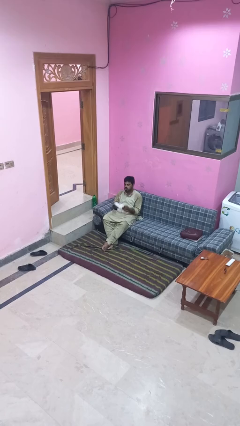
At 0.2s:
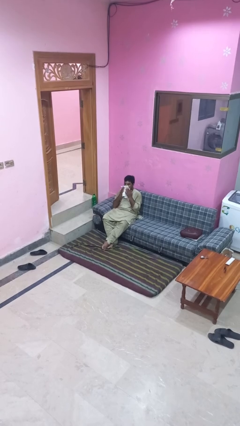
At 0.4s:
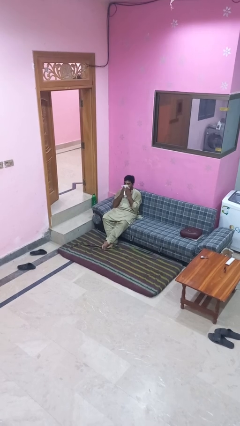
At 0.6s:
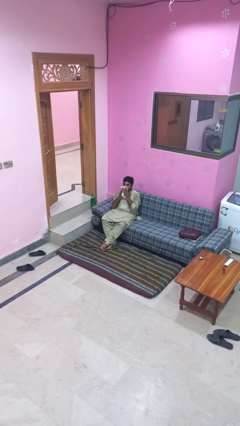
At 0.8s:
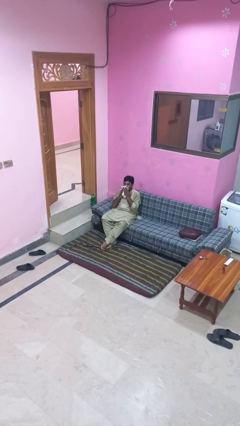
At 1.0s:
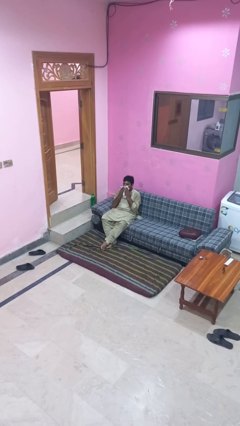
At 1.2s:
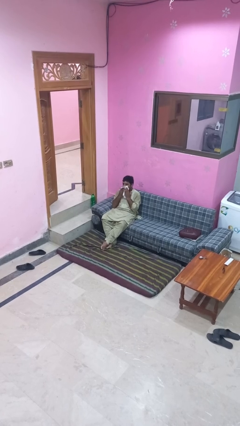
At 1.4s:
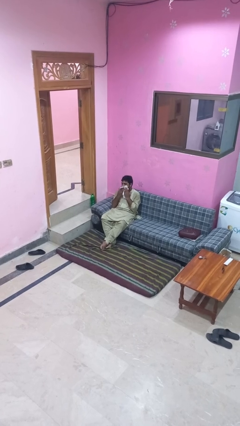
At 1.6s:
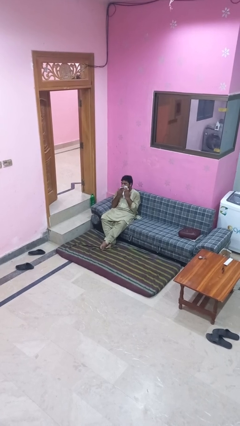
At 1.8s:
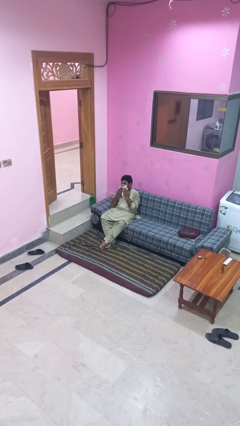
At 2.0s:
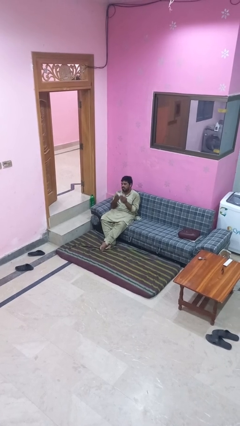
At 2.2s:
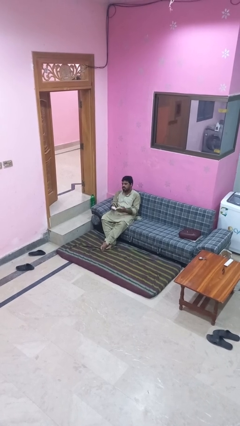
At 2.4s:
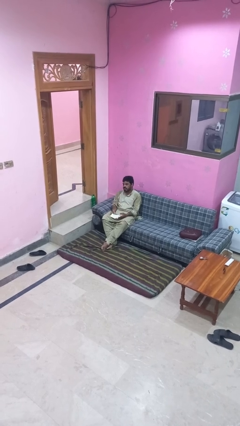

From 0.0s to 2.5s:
person wipes mouth with napkin

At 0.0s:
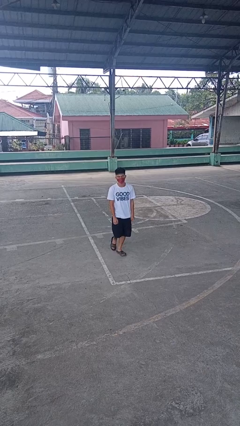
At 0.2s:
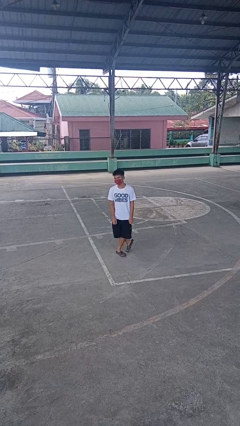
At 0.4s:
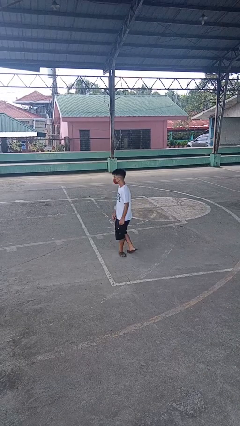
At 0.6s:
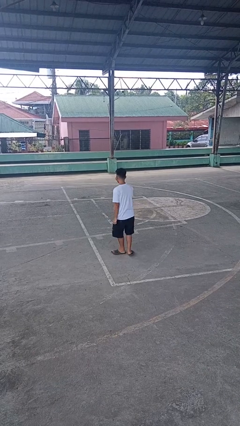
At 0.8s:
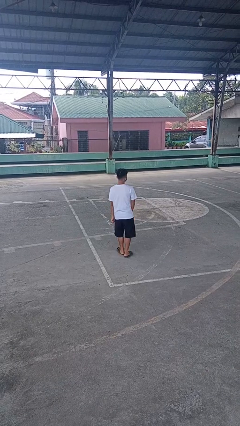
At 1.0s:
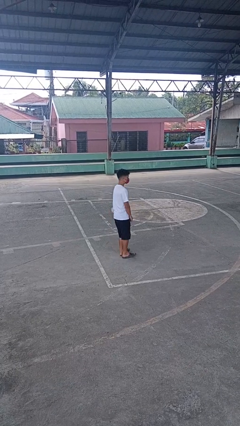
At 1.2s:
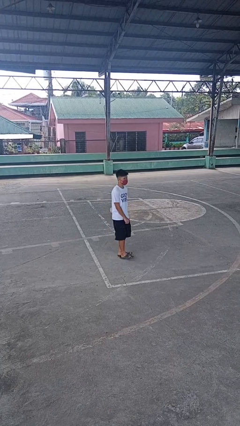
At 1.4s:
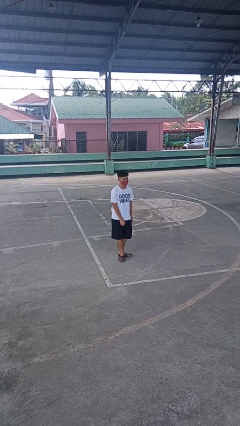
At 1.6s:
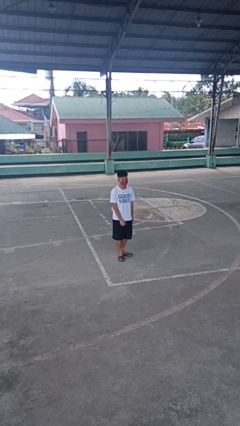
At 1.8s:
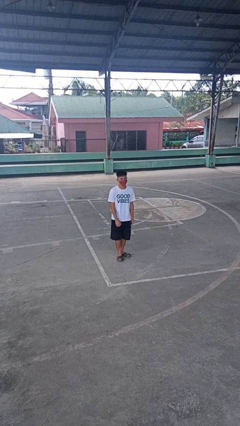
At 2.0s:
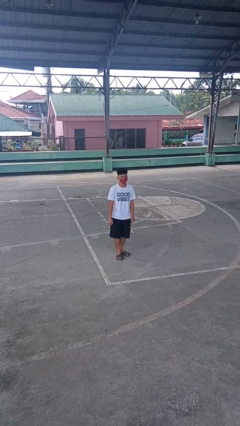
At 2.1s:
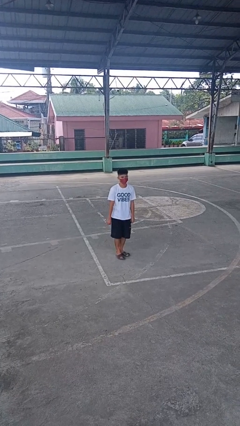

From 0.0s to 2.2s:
person twirls

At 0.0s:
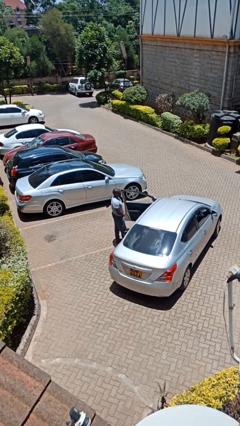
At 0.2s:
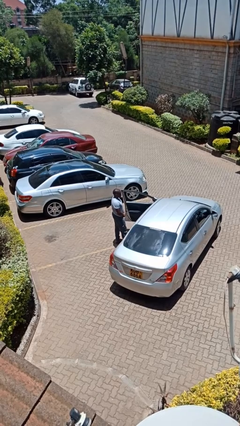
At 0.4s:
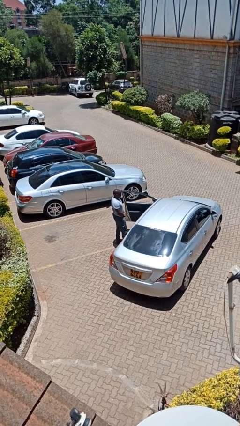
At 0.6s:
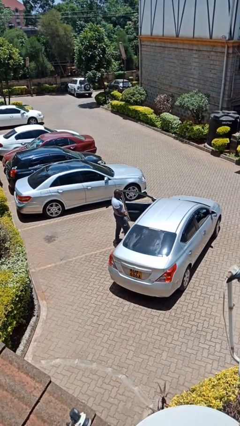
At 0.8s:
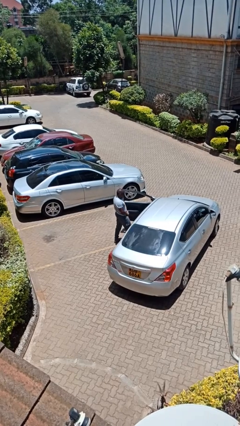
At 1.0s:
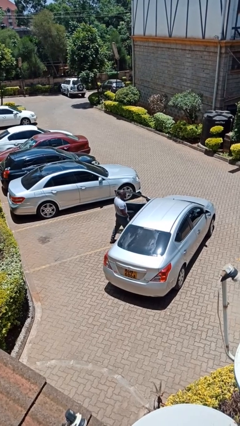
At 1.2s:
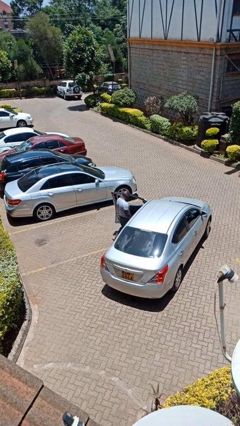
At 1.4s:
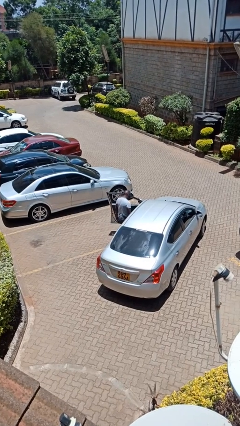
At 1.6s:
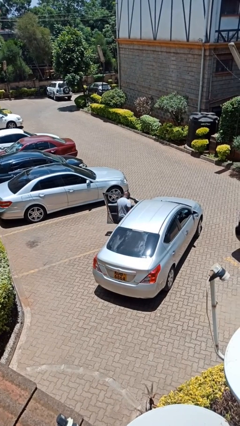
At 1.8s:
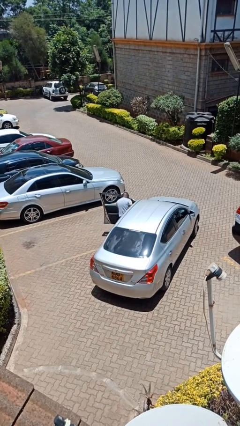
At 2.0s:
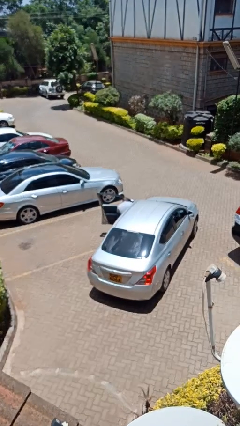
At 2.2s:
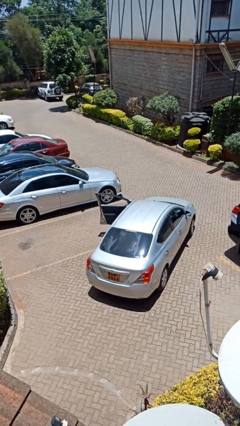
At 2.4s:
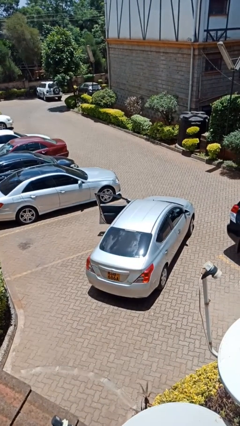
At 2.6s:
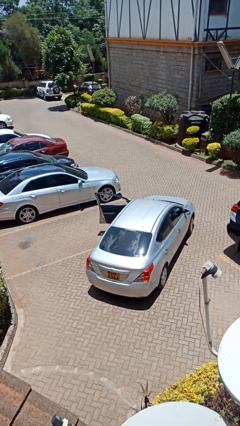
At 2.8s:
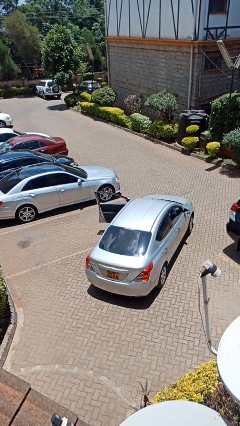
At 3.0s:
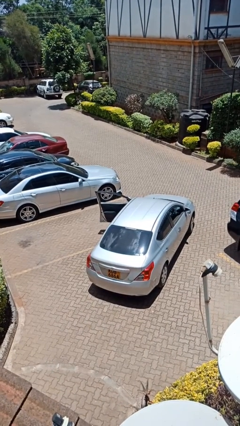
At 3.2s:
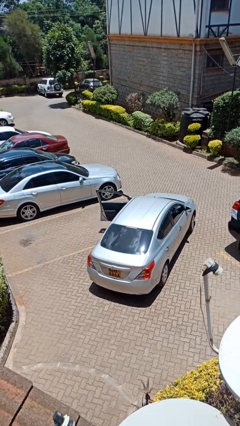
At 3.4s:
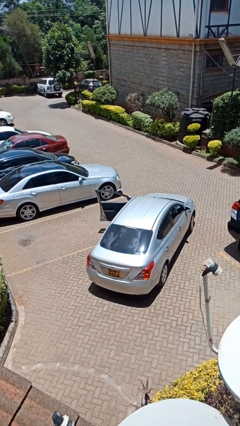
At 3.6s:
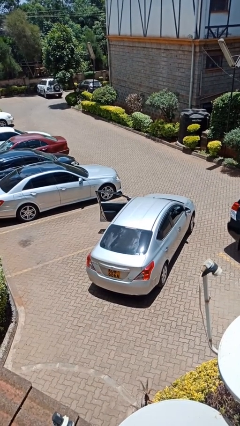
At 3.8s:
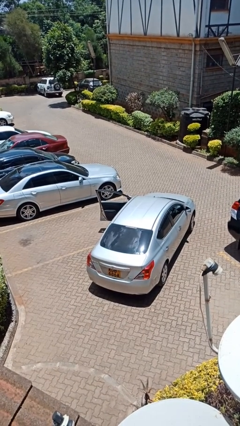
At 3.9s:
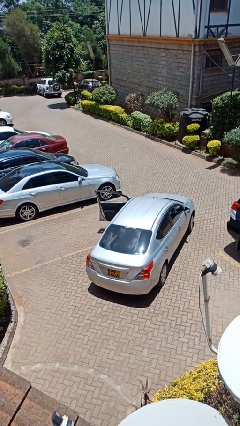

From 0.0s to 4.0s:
person enters car

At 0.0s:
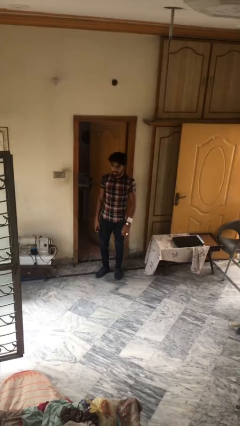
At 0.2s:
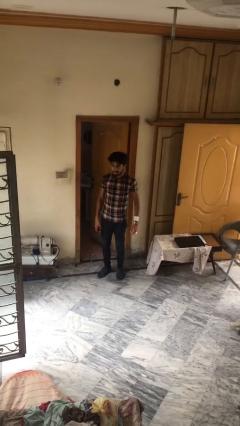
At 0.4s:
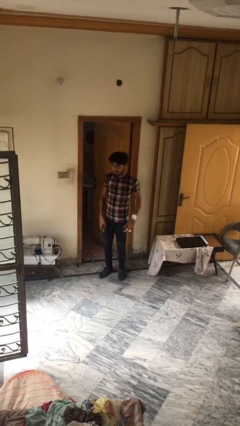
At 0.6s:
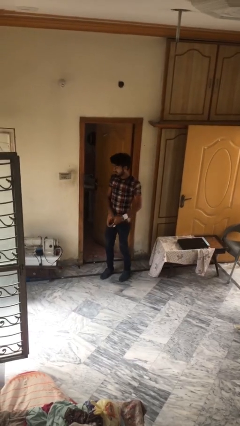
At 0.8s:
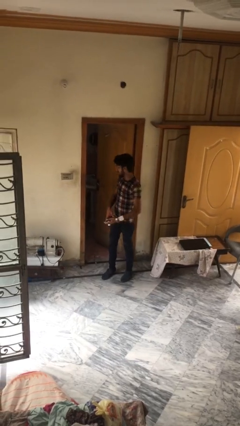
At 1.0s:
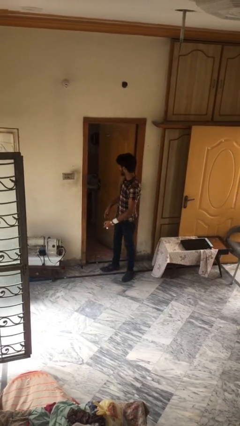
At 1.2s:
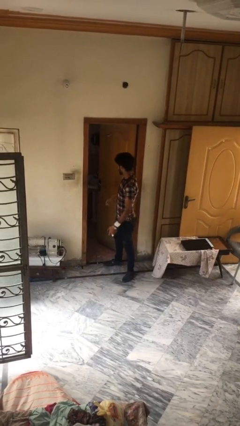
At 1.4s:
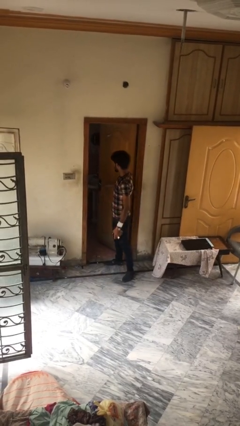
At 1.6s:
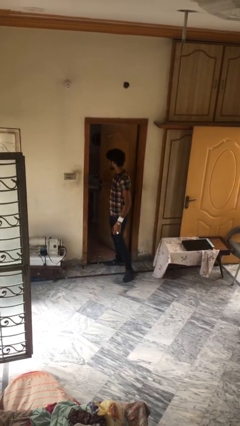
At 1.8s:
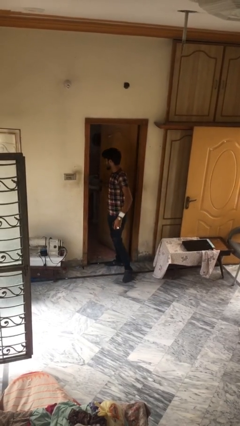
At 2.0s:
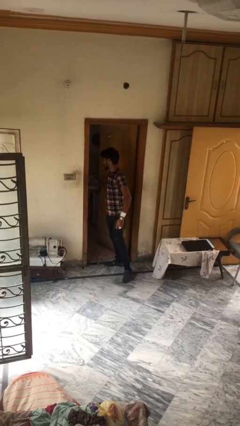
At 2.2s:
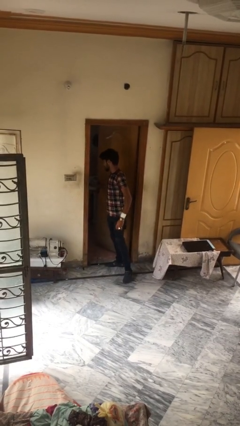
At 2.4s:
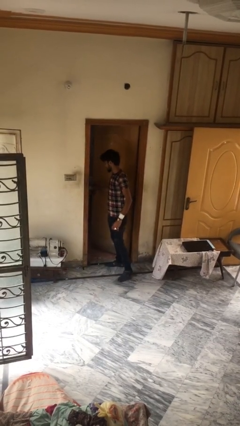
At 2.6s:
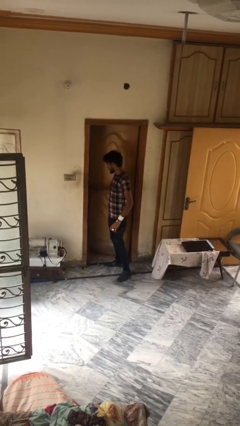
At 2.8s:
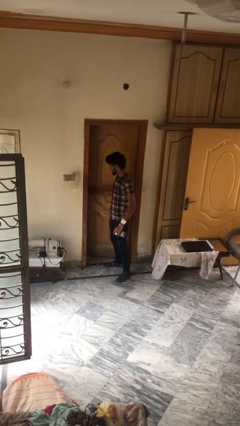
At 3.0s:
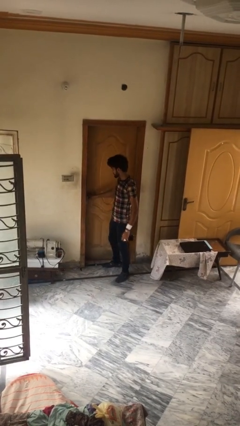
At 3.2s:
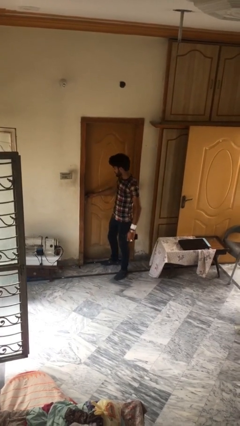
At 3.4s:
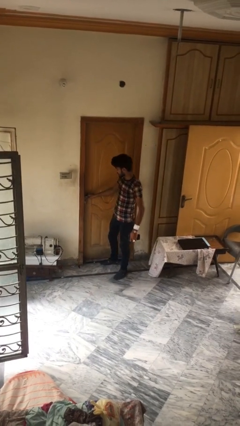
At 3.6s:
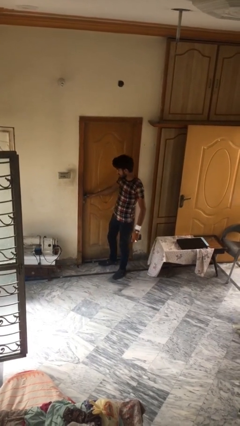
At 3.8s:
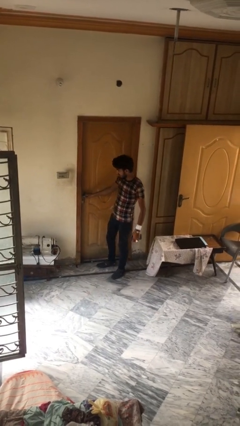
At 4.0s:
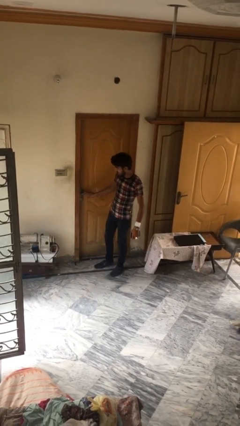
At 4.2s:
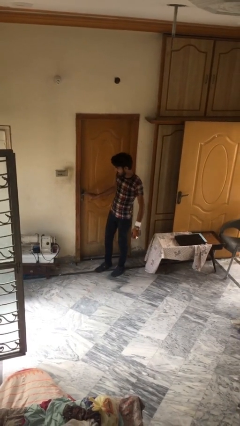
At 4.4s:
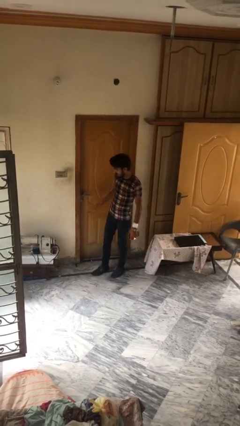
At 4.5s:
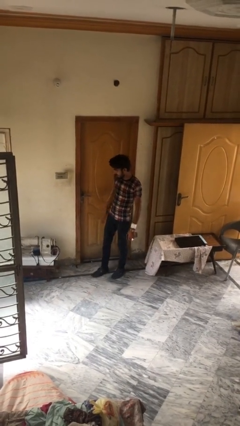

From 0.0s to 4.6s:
person closes facility door

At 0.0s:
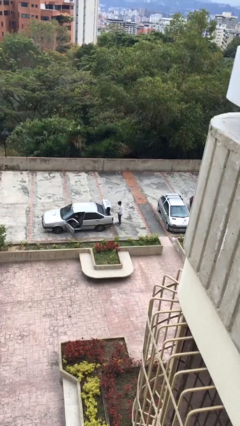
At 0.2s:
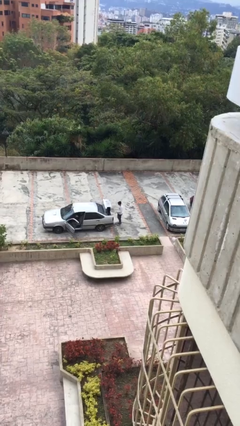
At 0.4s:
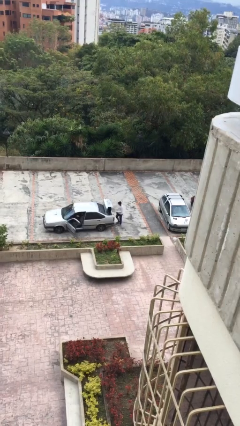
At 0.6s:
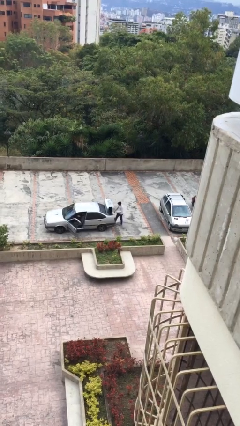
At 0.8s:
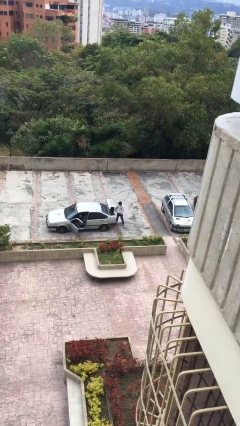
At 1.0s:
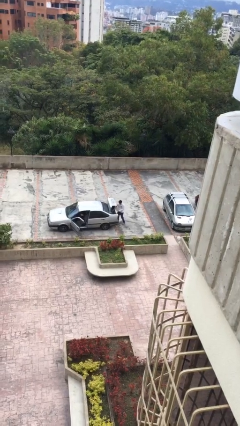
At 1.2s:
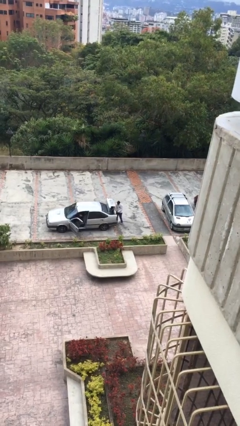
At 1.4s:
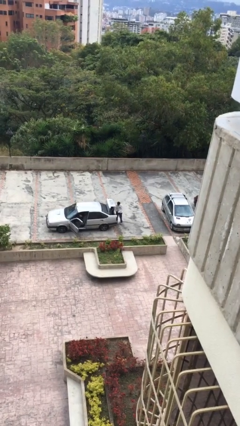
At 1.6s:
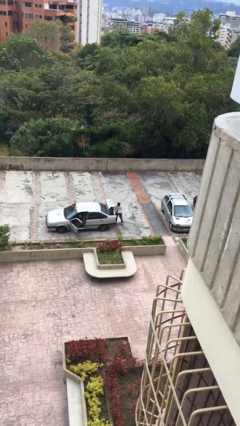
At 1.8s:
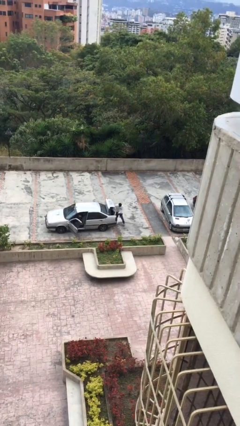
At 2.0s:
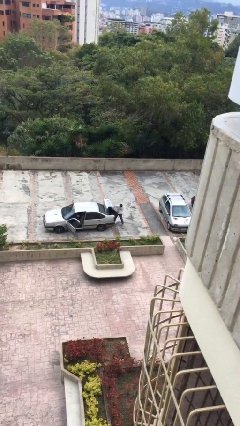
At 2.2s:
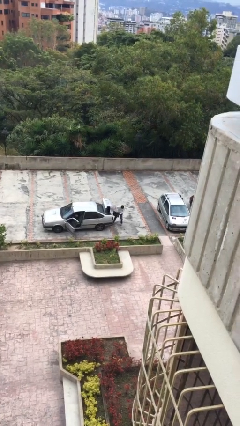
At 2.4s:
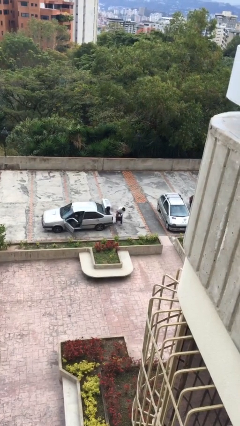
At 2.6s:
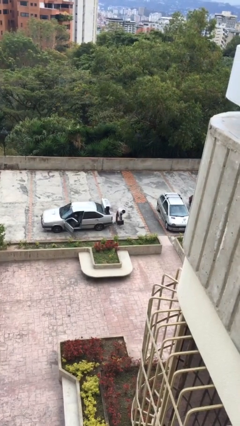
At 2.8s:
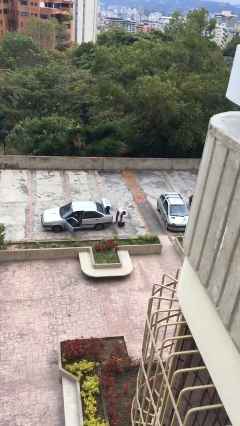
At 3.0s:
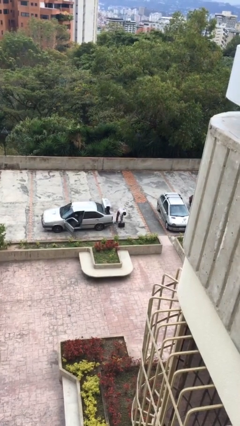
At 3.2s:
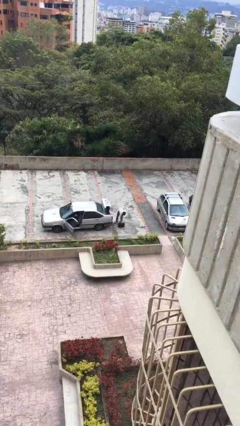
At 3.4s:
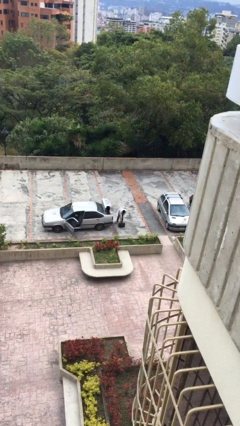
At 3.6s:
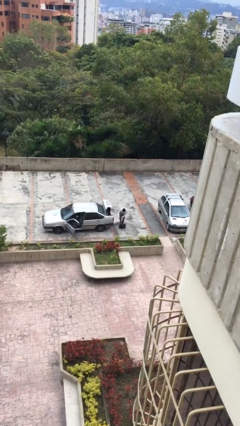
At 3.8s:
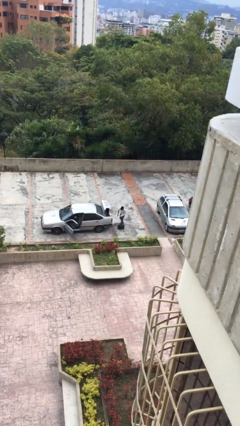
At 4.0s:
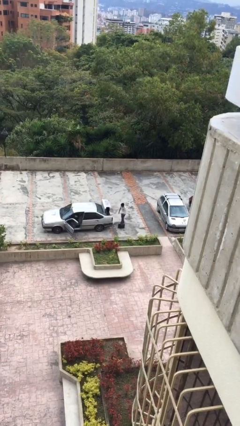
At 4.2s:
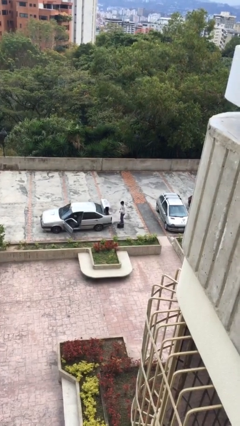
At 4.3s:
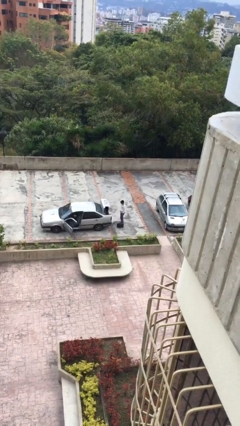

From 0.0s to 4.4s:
person unloads car
